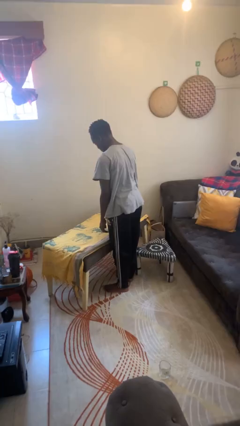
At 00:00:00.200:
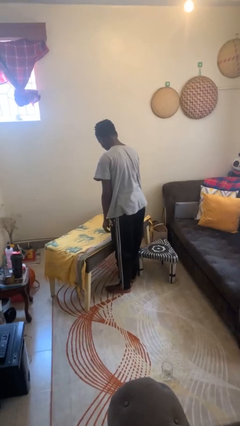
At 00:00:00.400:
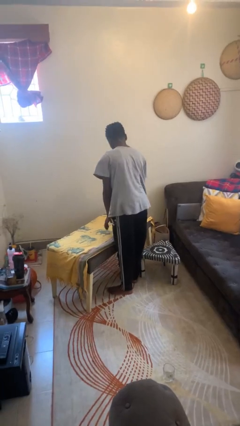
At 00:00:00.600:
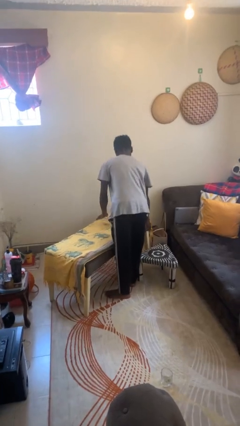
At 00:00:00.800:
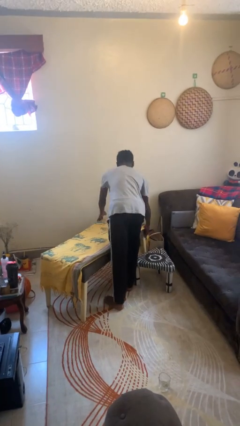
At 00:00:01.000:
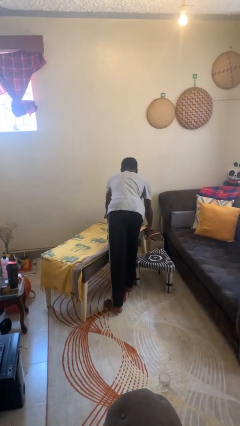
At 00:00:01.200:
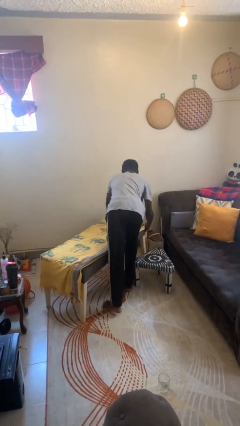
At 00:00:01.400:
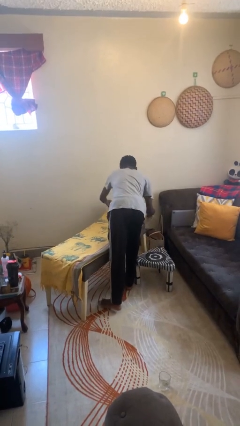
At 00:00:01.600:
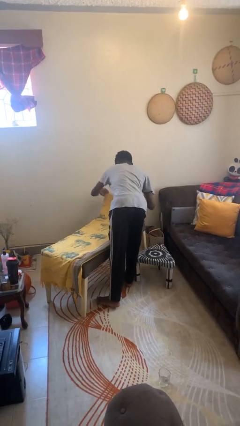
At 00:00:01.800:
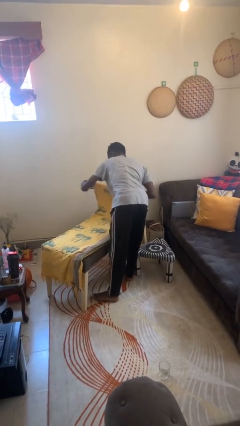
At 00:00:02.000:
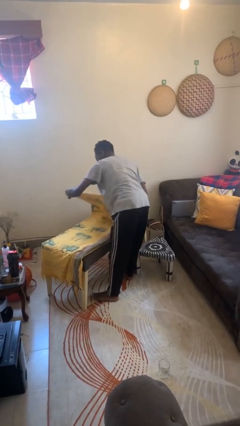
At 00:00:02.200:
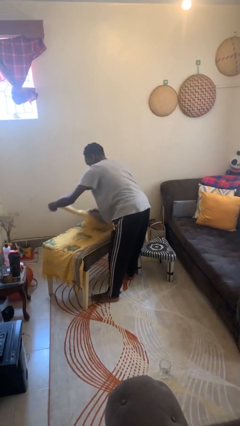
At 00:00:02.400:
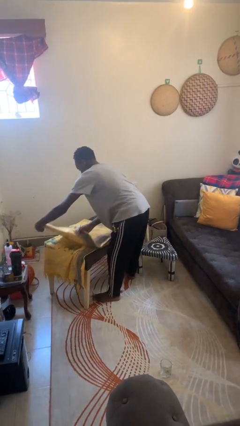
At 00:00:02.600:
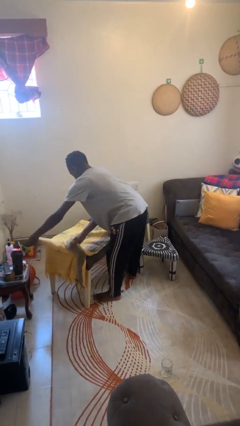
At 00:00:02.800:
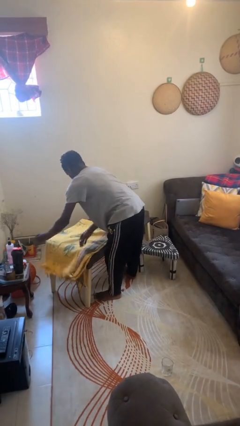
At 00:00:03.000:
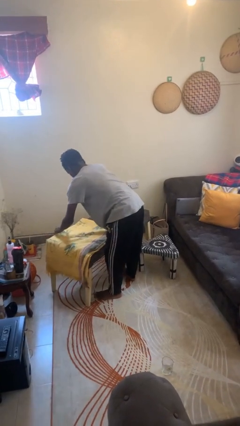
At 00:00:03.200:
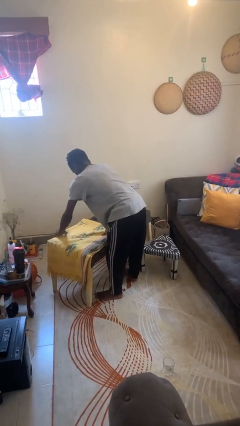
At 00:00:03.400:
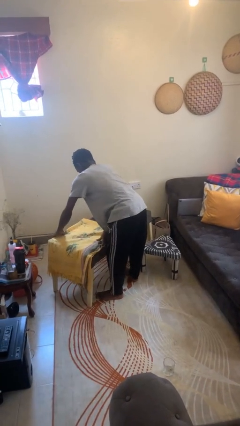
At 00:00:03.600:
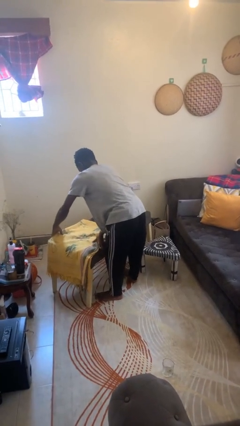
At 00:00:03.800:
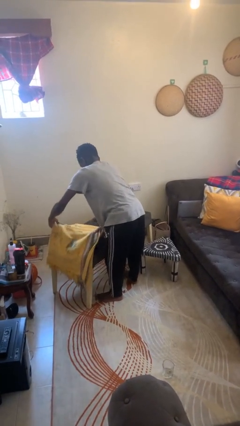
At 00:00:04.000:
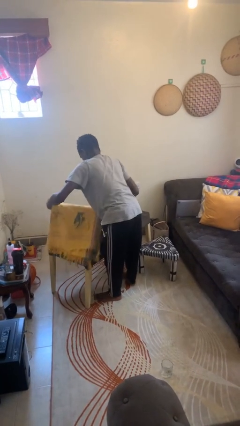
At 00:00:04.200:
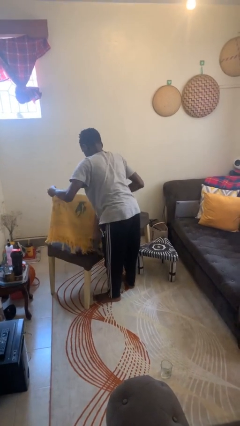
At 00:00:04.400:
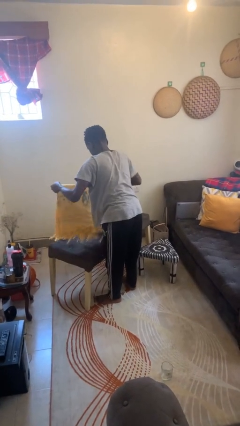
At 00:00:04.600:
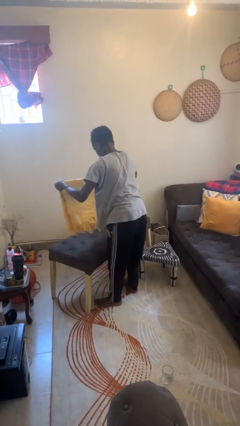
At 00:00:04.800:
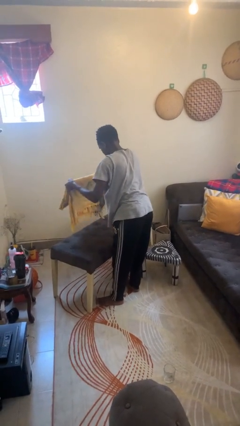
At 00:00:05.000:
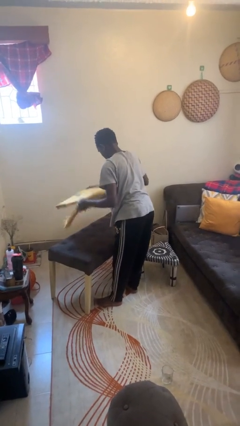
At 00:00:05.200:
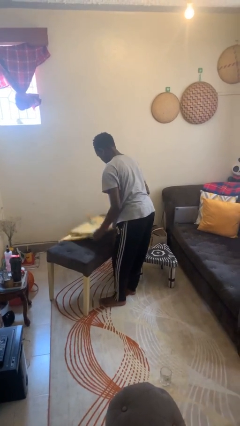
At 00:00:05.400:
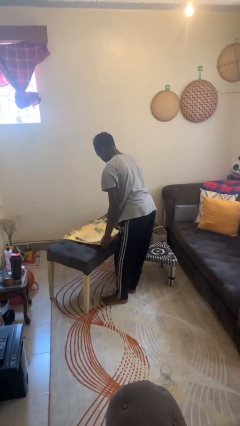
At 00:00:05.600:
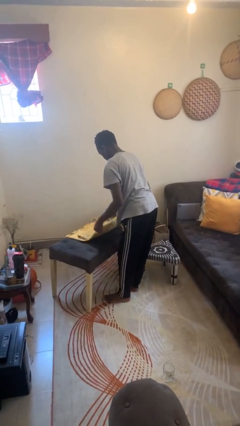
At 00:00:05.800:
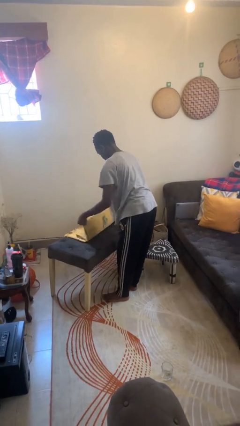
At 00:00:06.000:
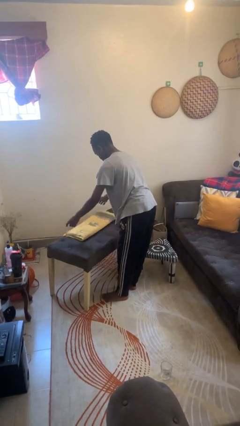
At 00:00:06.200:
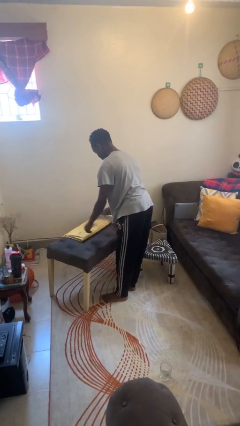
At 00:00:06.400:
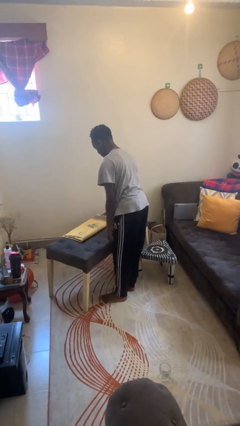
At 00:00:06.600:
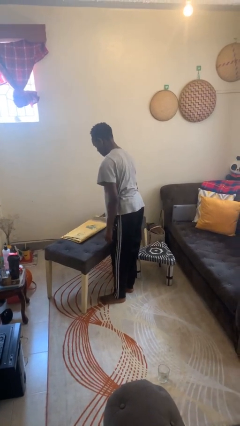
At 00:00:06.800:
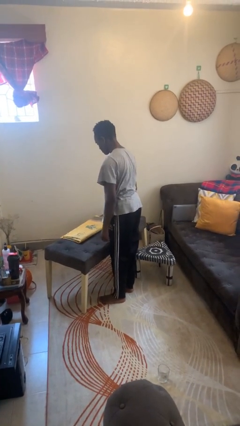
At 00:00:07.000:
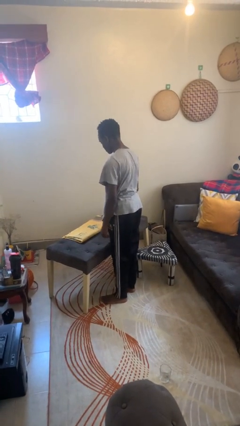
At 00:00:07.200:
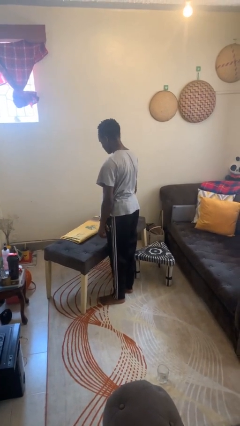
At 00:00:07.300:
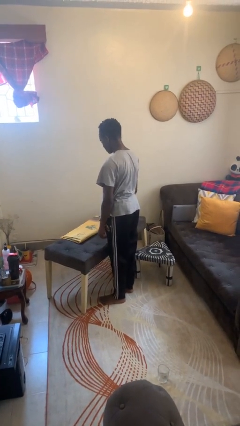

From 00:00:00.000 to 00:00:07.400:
person folds tablecloth

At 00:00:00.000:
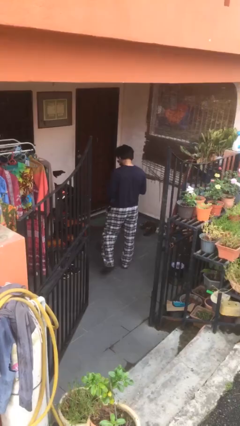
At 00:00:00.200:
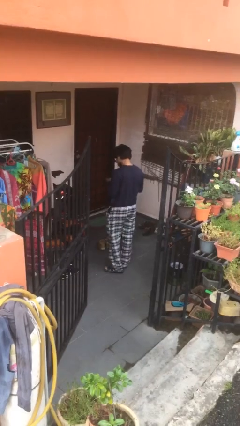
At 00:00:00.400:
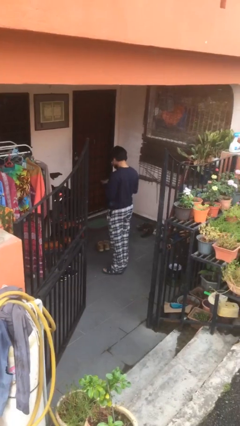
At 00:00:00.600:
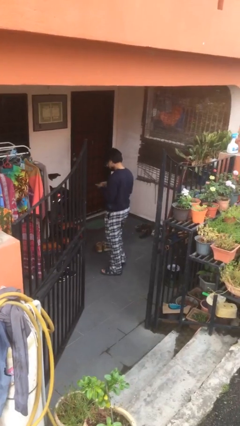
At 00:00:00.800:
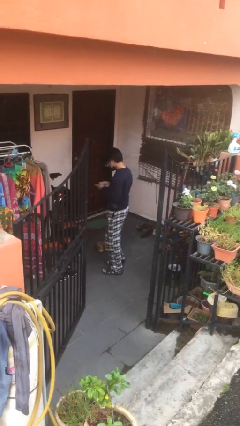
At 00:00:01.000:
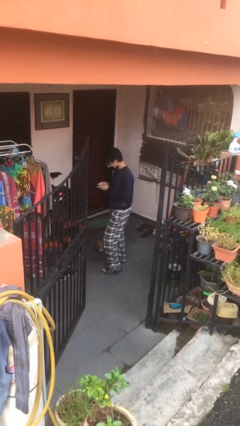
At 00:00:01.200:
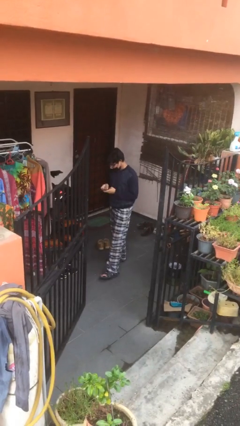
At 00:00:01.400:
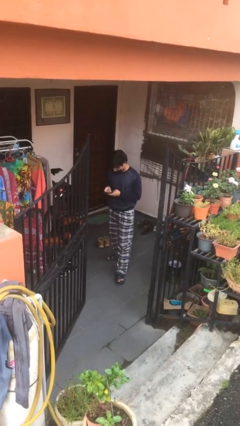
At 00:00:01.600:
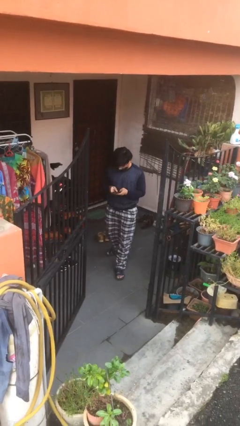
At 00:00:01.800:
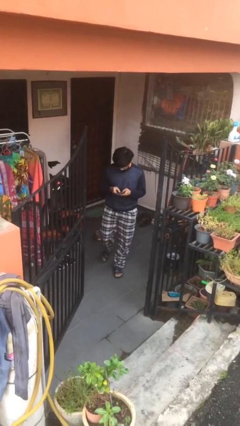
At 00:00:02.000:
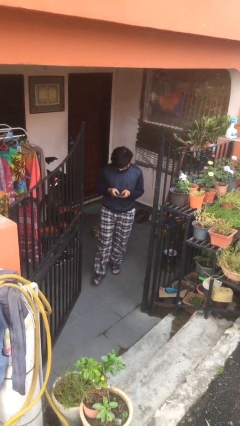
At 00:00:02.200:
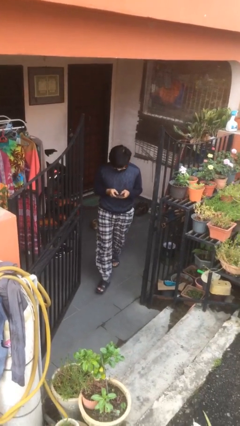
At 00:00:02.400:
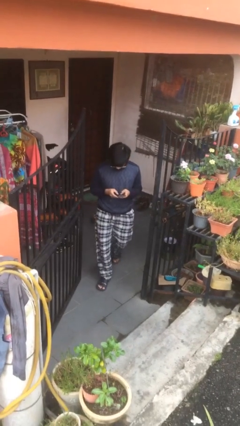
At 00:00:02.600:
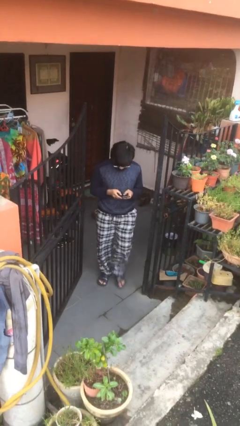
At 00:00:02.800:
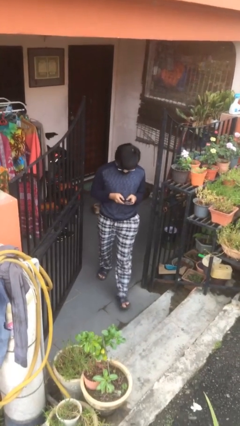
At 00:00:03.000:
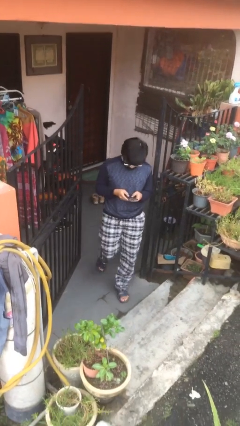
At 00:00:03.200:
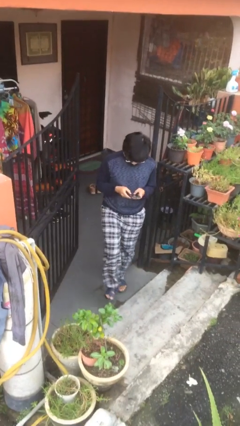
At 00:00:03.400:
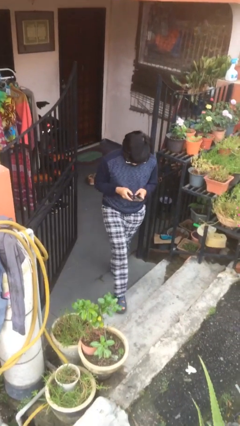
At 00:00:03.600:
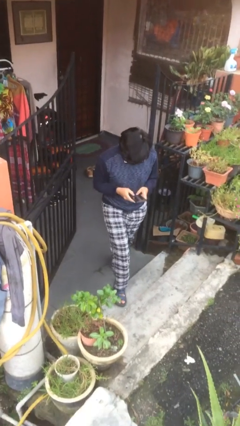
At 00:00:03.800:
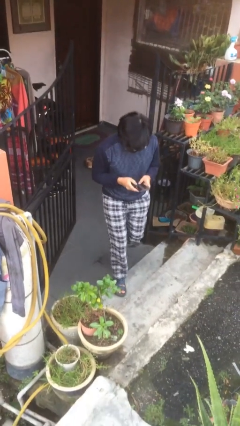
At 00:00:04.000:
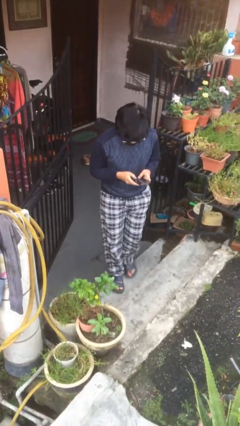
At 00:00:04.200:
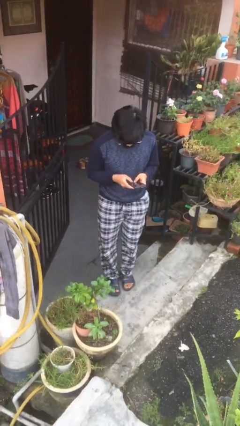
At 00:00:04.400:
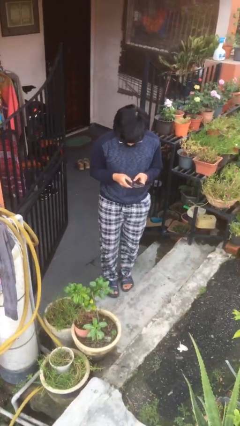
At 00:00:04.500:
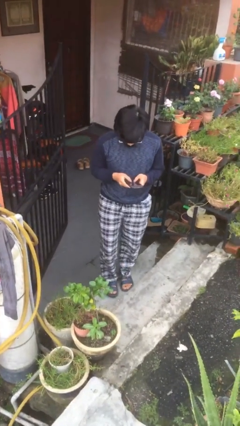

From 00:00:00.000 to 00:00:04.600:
person enters scene through structure

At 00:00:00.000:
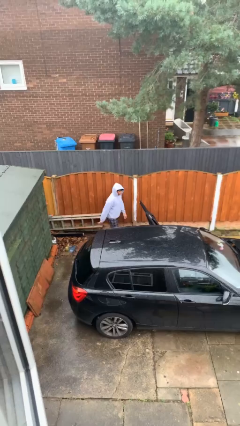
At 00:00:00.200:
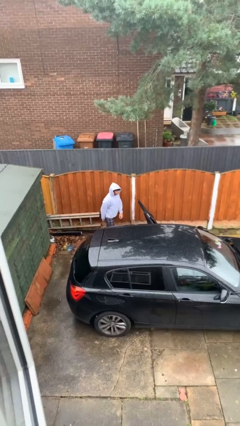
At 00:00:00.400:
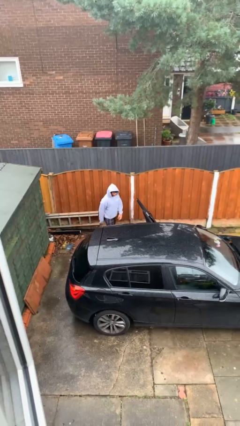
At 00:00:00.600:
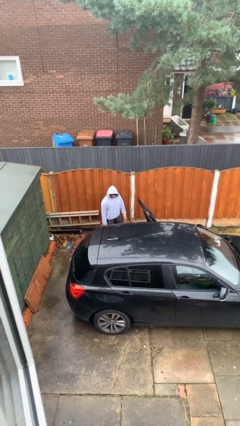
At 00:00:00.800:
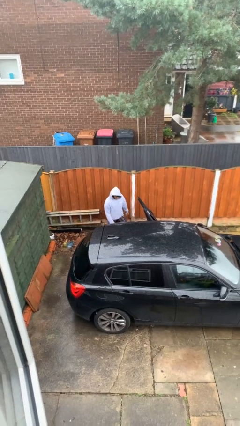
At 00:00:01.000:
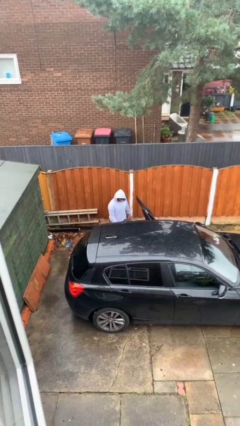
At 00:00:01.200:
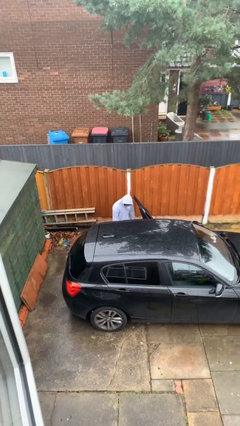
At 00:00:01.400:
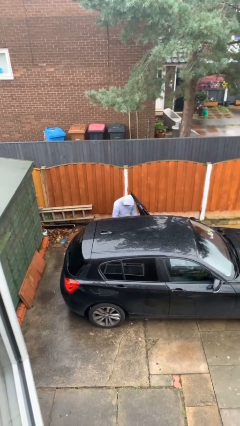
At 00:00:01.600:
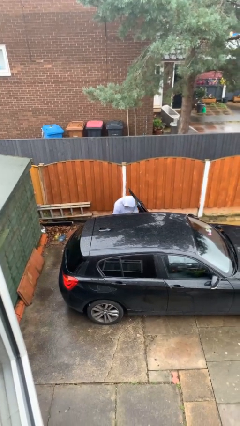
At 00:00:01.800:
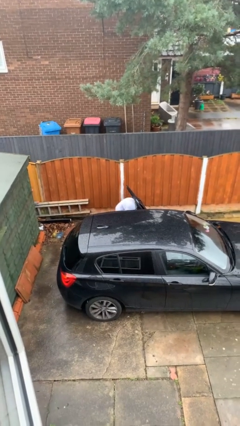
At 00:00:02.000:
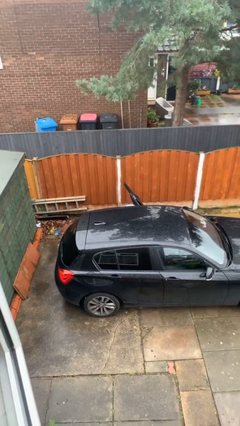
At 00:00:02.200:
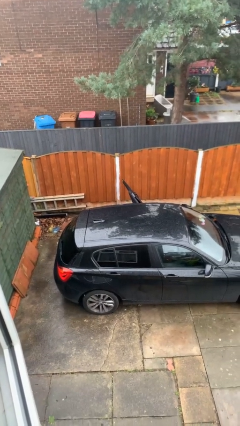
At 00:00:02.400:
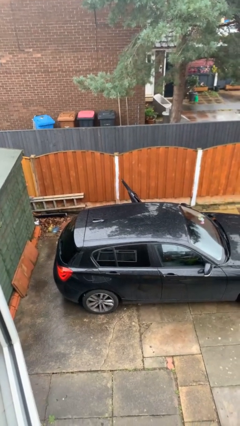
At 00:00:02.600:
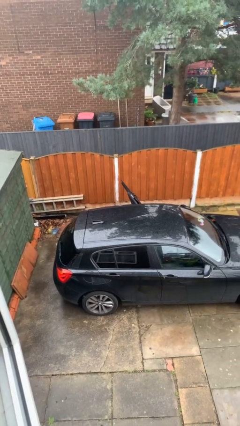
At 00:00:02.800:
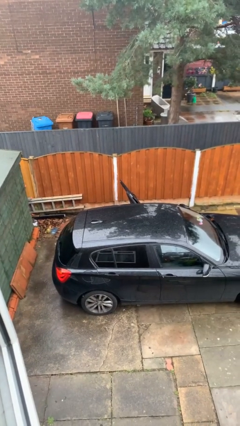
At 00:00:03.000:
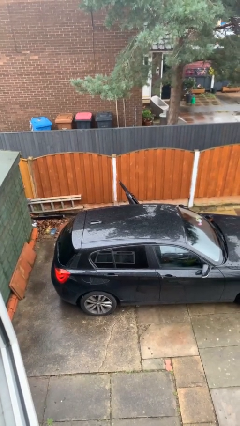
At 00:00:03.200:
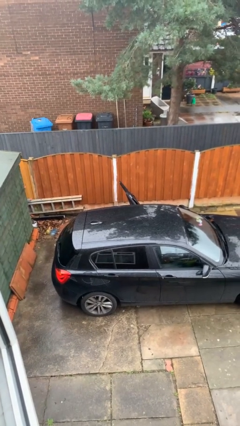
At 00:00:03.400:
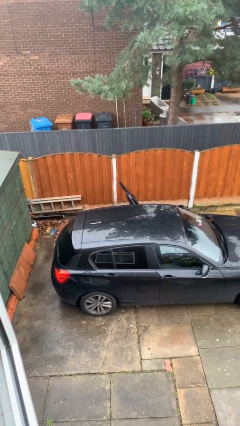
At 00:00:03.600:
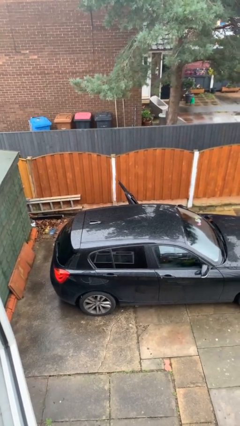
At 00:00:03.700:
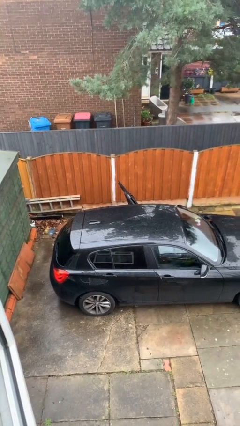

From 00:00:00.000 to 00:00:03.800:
person enters car

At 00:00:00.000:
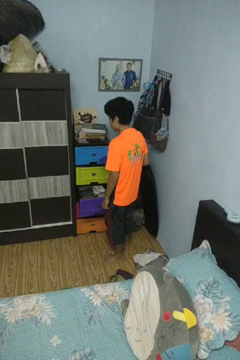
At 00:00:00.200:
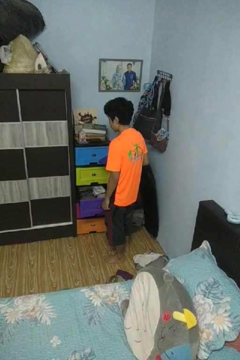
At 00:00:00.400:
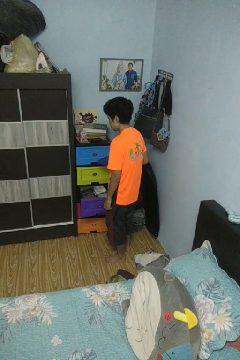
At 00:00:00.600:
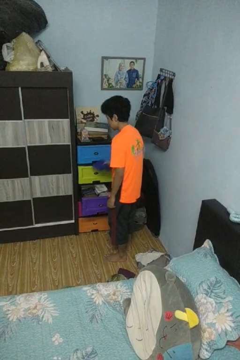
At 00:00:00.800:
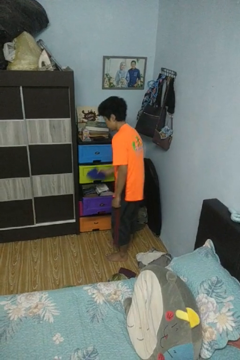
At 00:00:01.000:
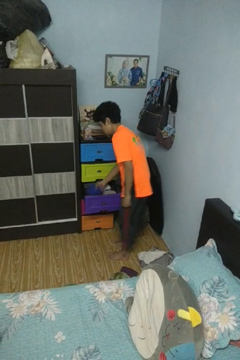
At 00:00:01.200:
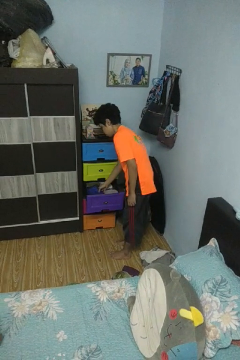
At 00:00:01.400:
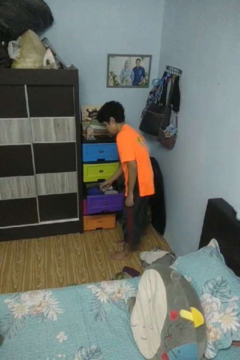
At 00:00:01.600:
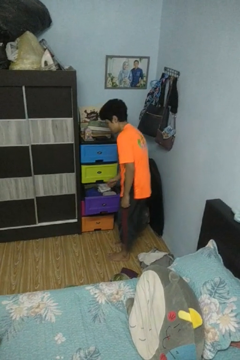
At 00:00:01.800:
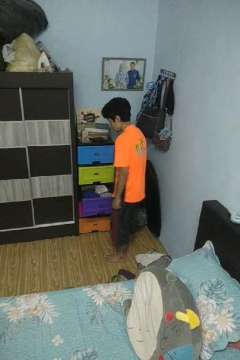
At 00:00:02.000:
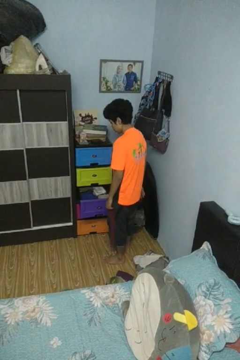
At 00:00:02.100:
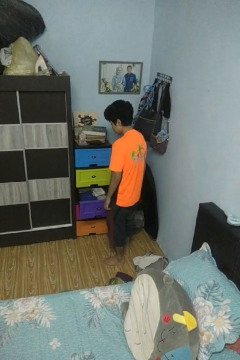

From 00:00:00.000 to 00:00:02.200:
person puts clothes into dresser
